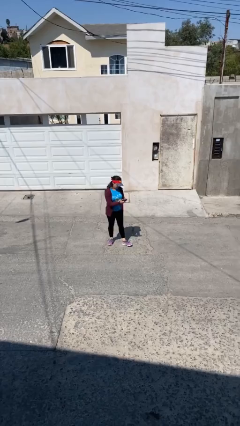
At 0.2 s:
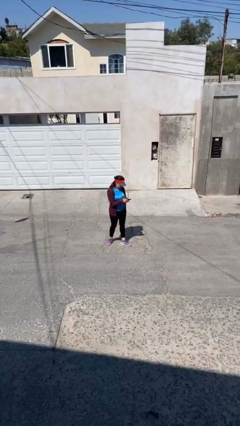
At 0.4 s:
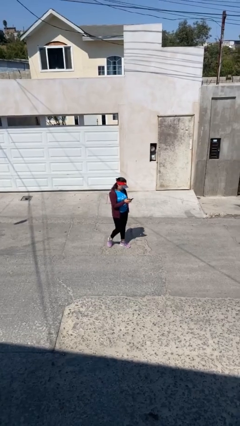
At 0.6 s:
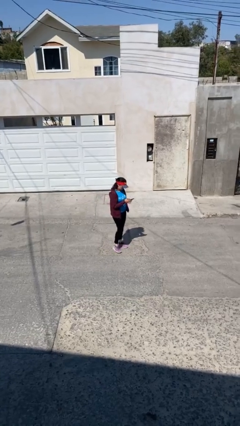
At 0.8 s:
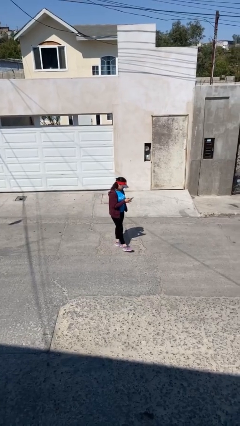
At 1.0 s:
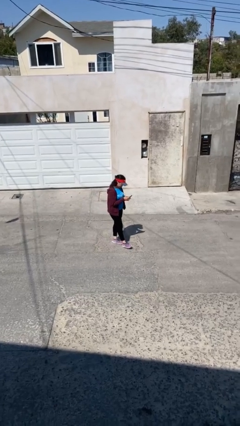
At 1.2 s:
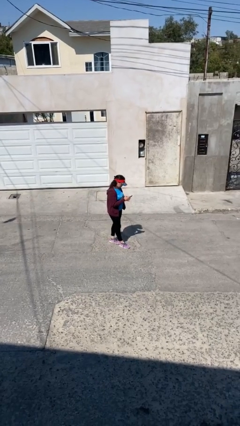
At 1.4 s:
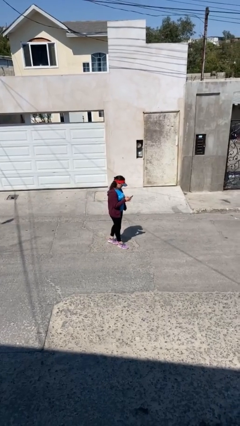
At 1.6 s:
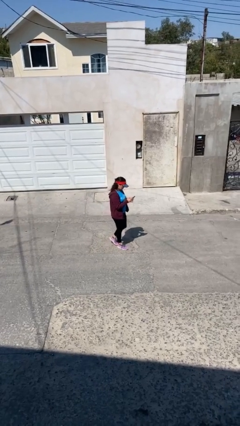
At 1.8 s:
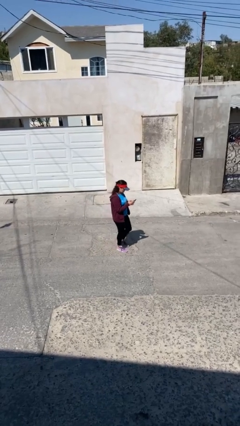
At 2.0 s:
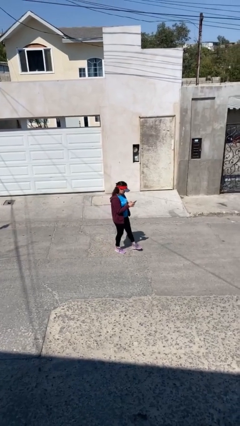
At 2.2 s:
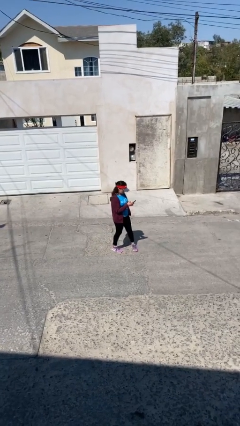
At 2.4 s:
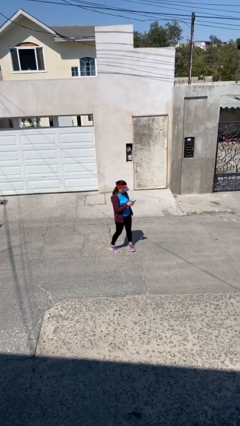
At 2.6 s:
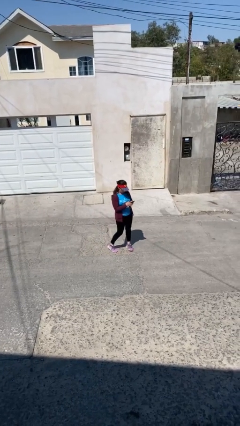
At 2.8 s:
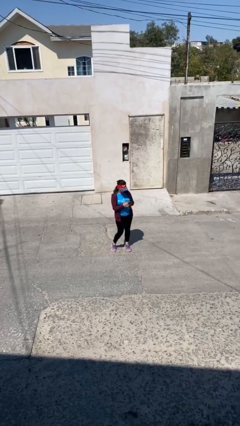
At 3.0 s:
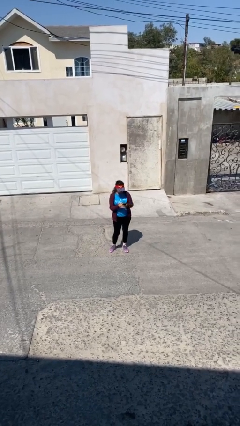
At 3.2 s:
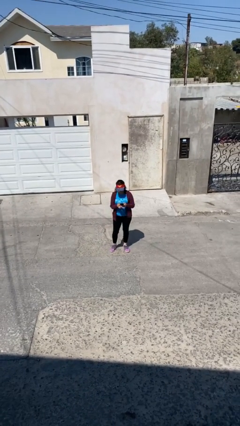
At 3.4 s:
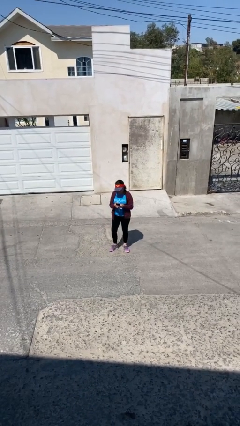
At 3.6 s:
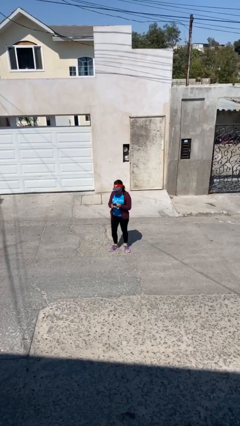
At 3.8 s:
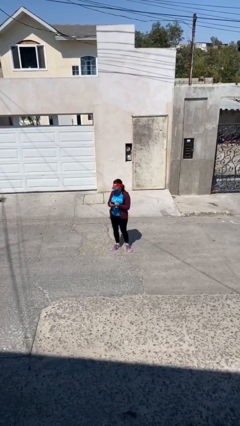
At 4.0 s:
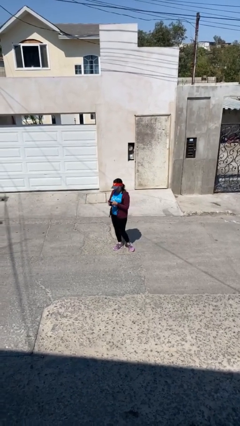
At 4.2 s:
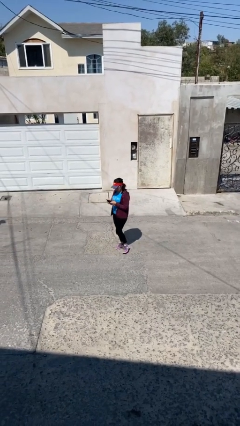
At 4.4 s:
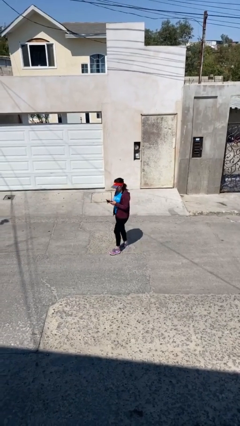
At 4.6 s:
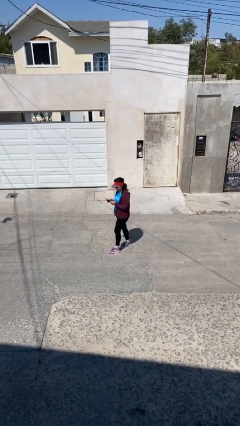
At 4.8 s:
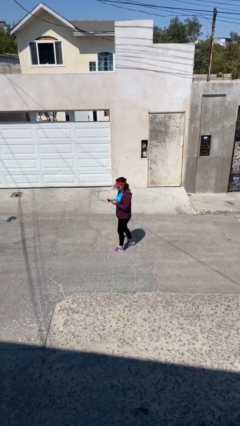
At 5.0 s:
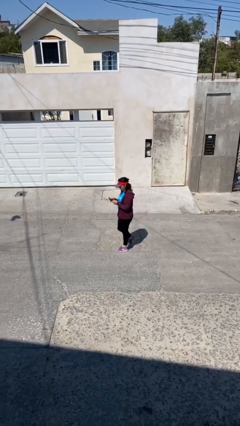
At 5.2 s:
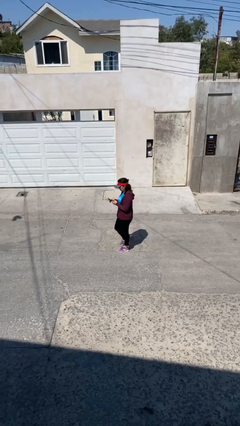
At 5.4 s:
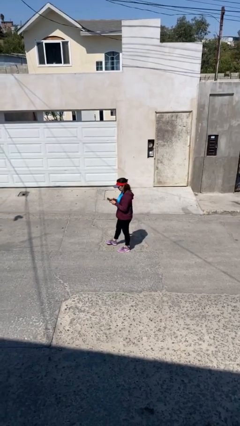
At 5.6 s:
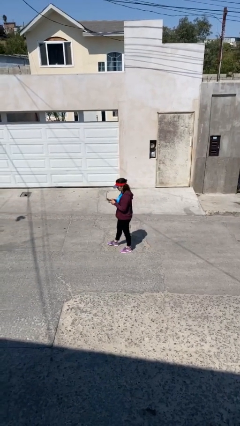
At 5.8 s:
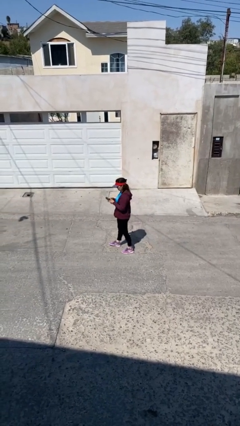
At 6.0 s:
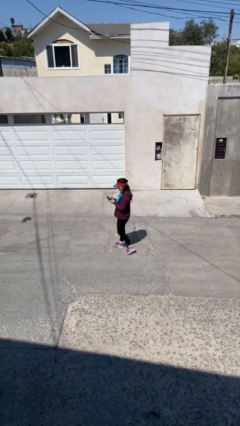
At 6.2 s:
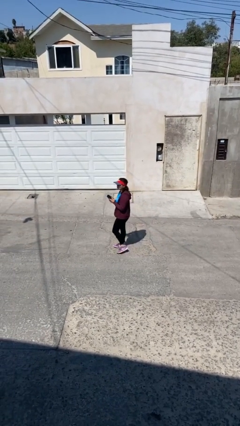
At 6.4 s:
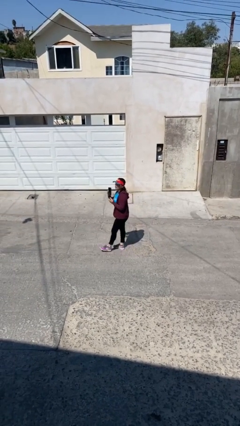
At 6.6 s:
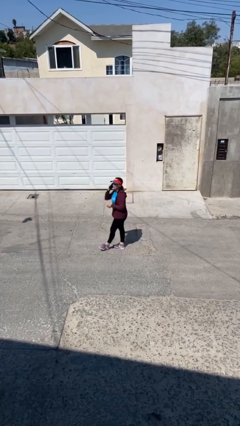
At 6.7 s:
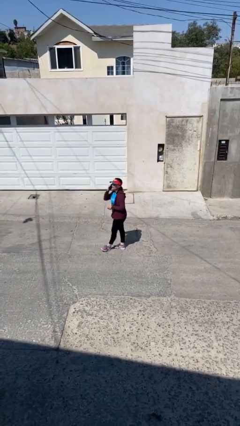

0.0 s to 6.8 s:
person texts on phone

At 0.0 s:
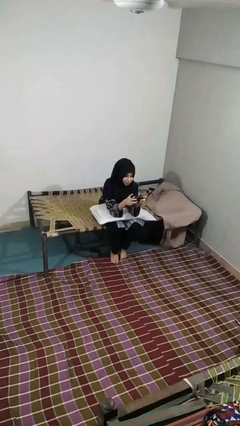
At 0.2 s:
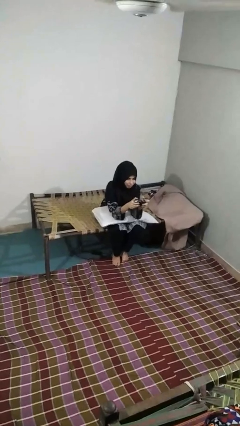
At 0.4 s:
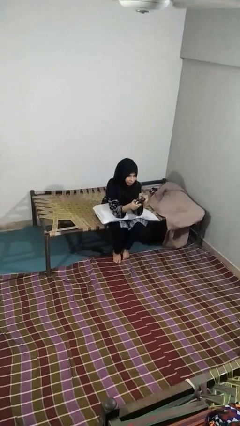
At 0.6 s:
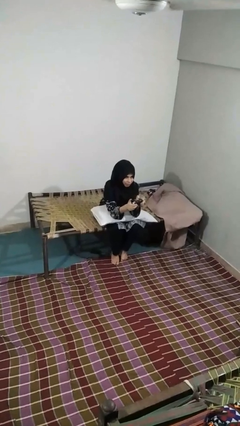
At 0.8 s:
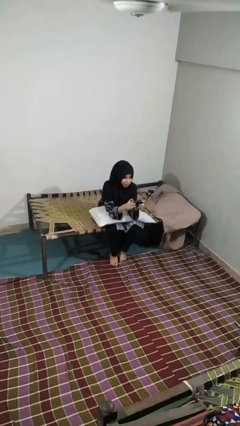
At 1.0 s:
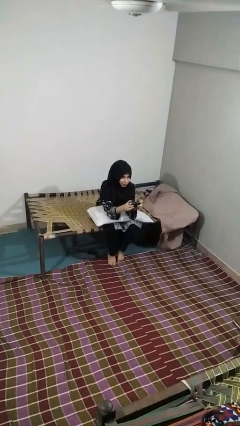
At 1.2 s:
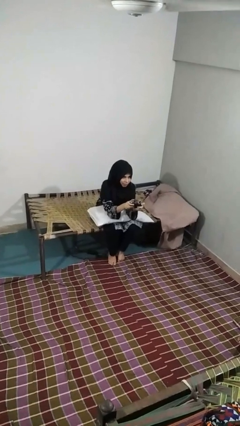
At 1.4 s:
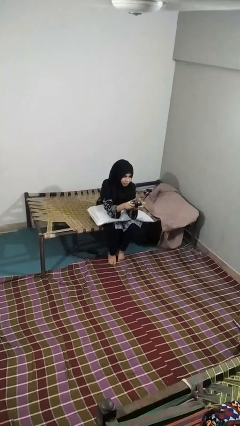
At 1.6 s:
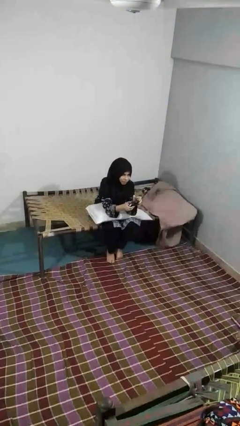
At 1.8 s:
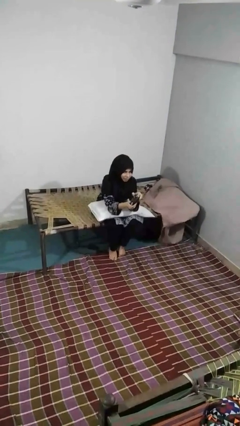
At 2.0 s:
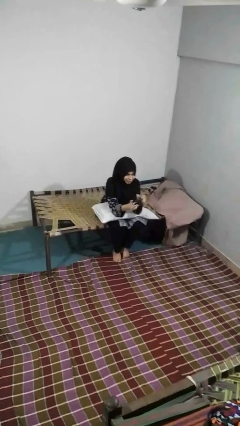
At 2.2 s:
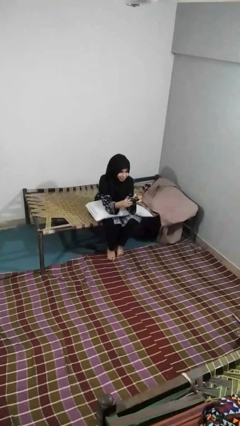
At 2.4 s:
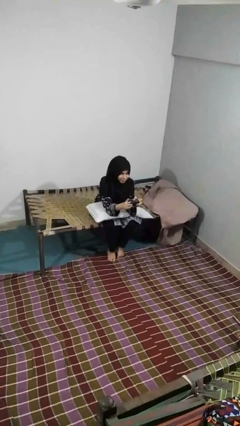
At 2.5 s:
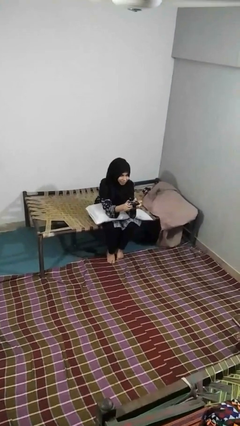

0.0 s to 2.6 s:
person interacts with handheld game

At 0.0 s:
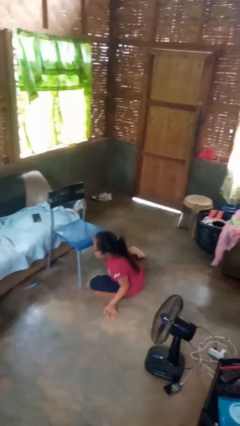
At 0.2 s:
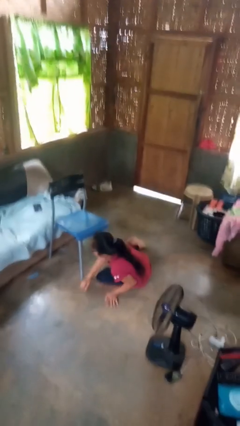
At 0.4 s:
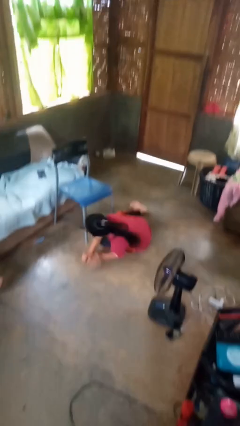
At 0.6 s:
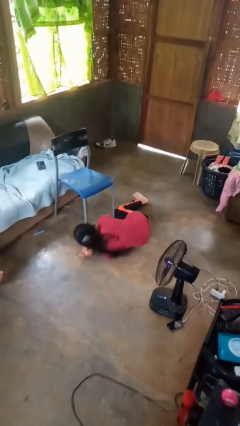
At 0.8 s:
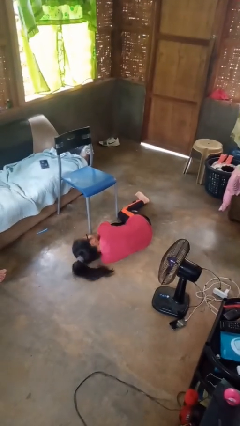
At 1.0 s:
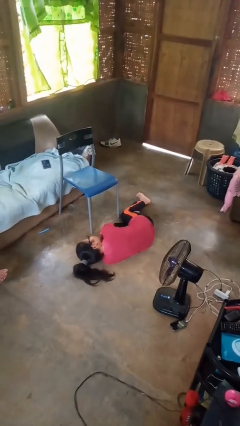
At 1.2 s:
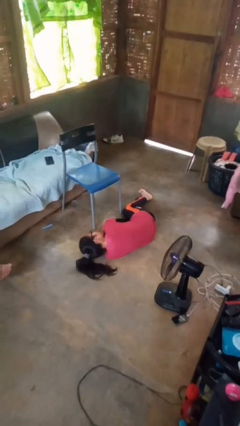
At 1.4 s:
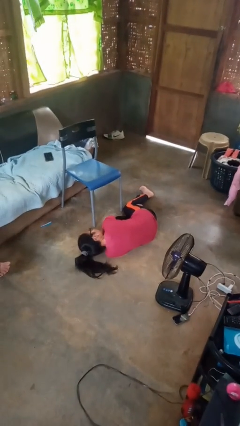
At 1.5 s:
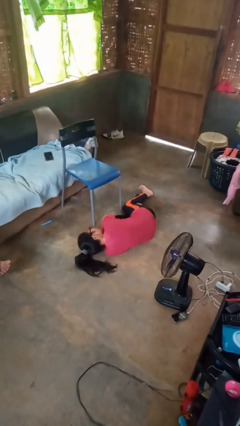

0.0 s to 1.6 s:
person lies down on floor

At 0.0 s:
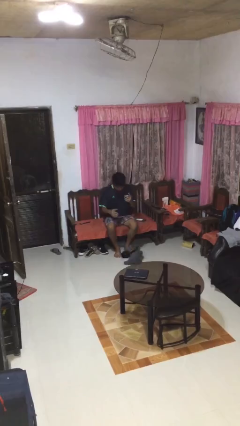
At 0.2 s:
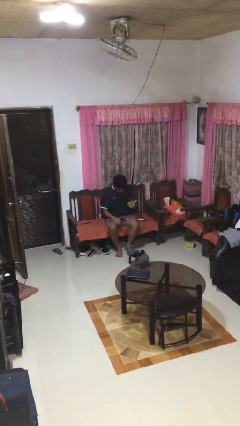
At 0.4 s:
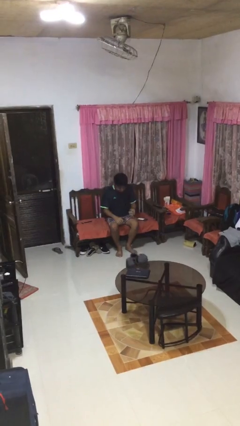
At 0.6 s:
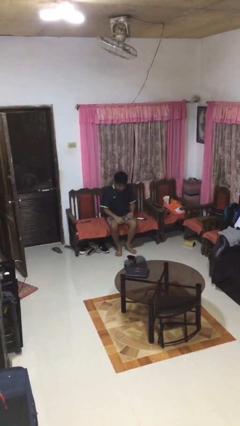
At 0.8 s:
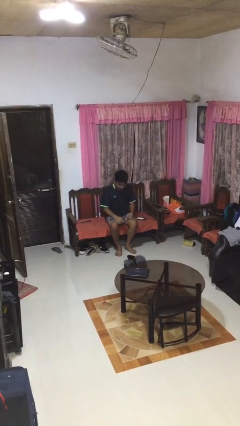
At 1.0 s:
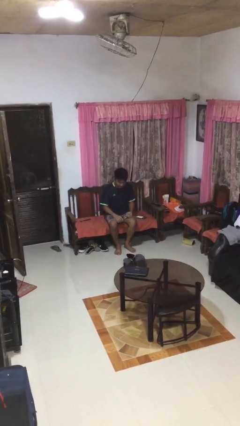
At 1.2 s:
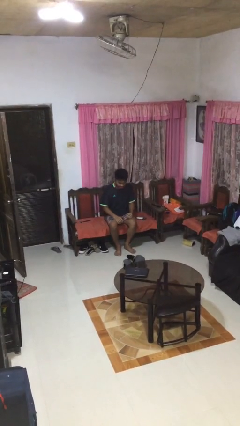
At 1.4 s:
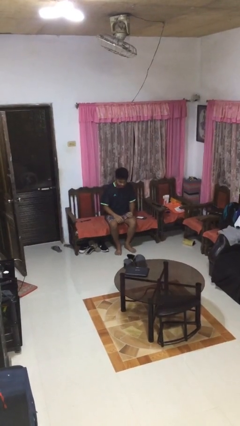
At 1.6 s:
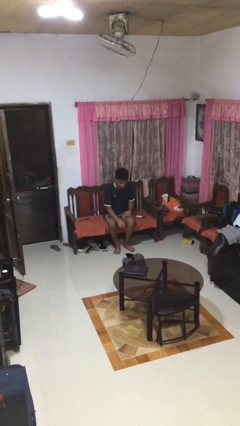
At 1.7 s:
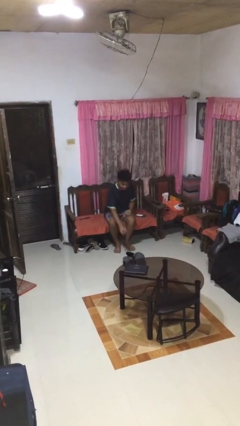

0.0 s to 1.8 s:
person drops object

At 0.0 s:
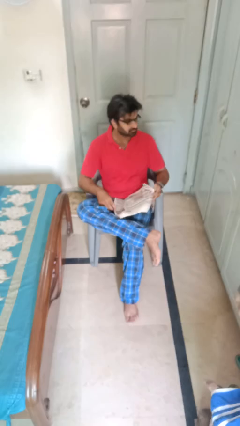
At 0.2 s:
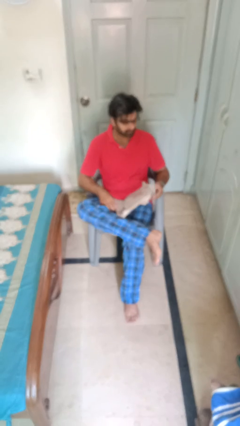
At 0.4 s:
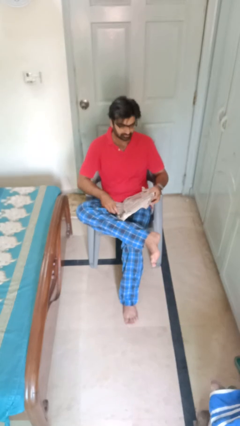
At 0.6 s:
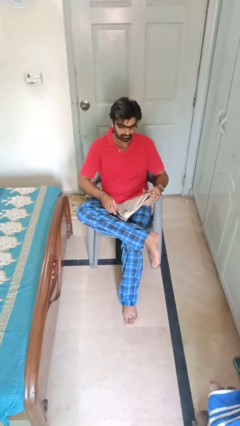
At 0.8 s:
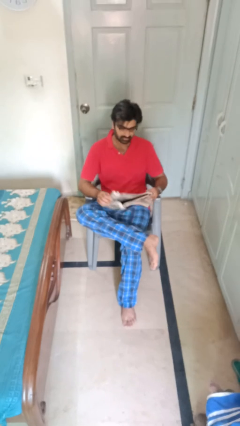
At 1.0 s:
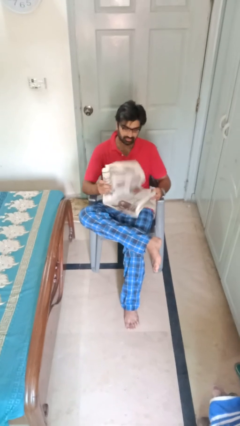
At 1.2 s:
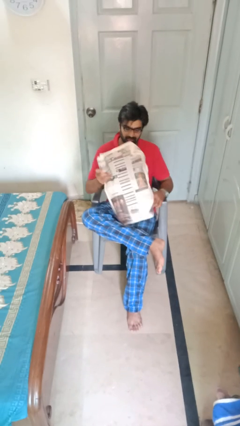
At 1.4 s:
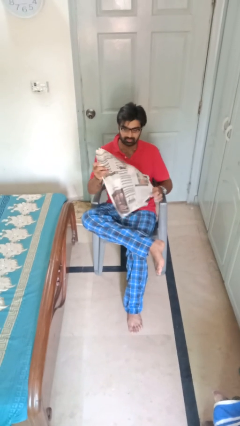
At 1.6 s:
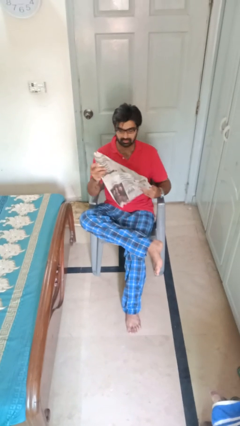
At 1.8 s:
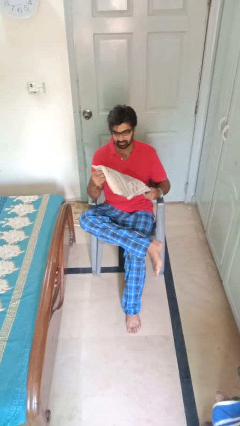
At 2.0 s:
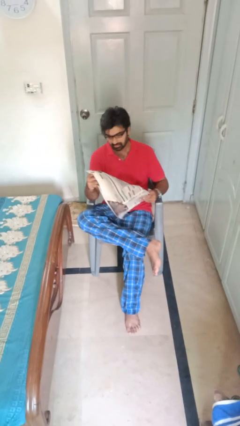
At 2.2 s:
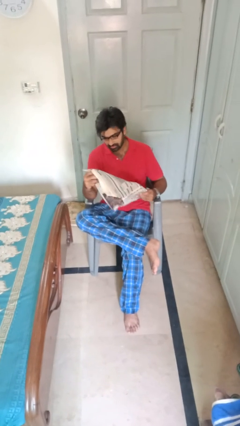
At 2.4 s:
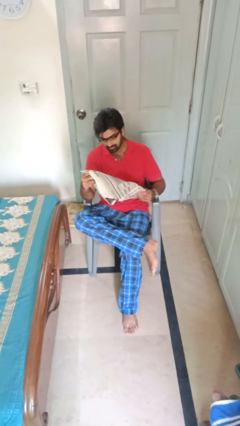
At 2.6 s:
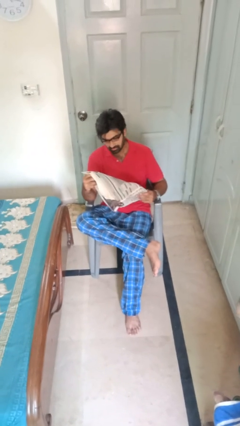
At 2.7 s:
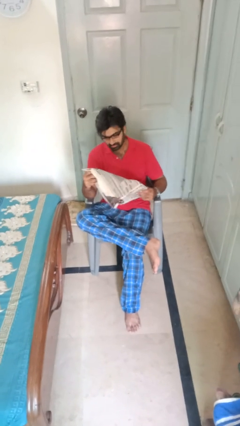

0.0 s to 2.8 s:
person reads newspaper

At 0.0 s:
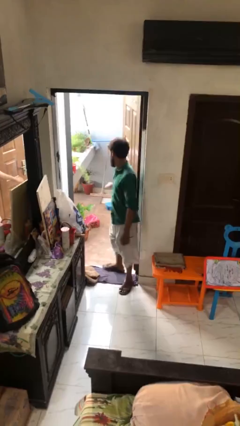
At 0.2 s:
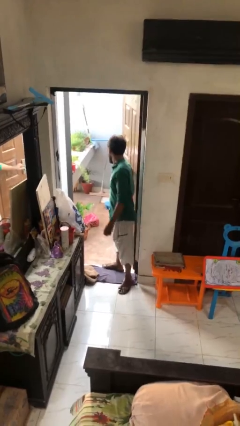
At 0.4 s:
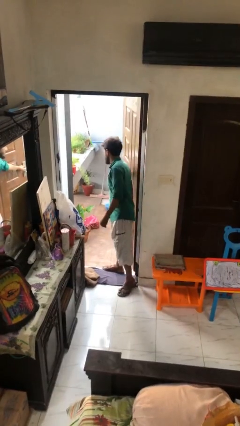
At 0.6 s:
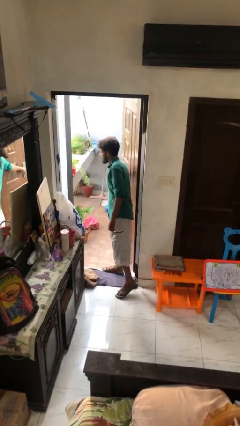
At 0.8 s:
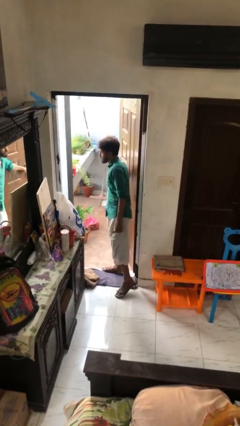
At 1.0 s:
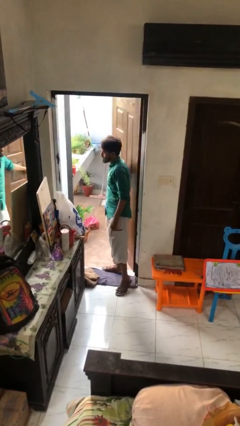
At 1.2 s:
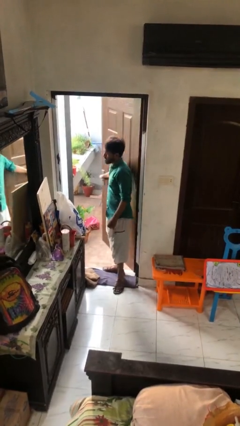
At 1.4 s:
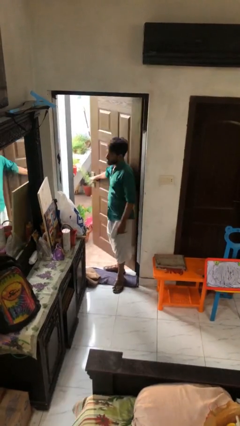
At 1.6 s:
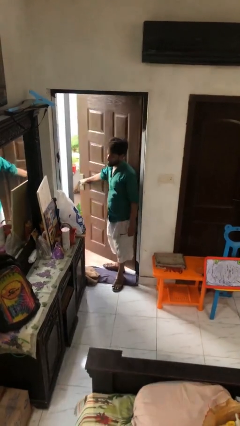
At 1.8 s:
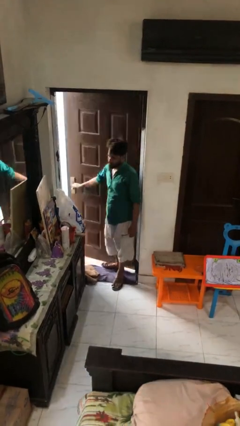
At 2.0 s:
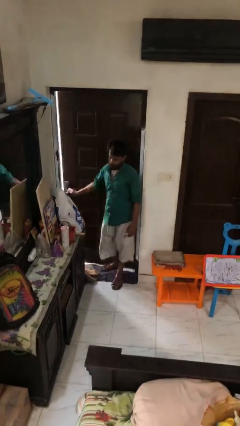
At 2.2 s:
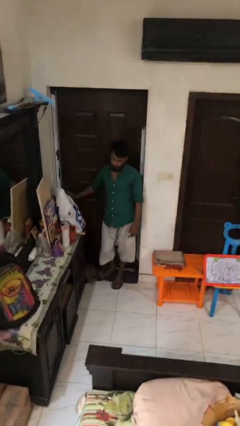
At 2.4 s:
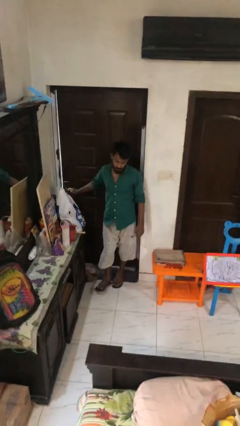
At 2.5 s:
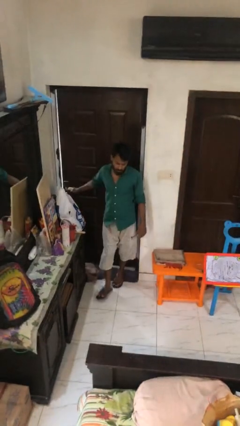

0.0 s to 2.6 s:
person closes facility door
